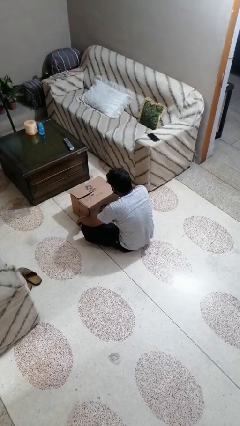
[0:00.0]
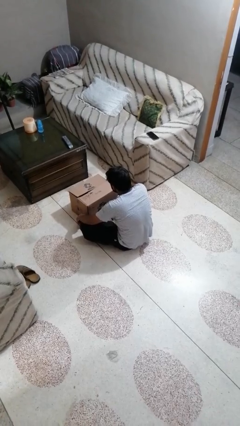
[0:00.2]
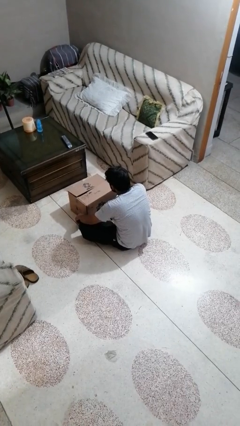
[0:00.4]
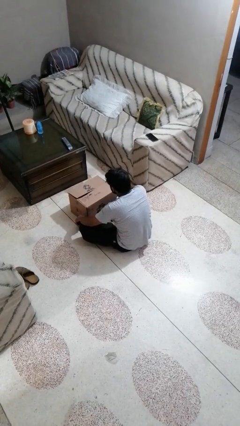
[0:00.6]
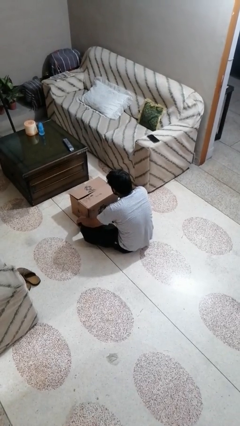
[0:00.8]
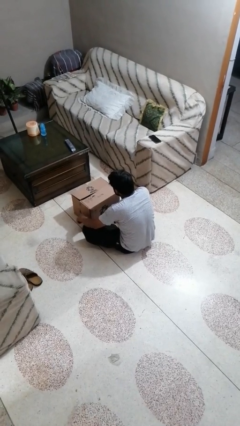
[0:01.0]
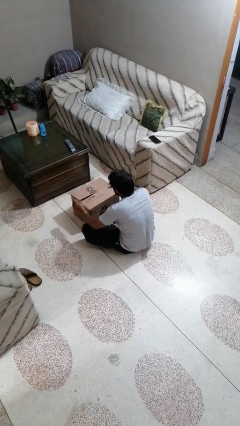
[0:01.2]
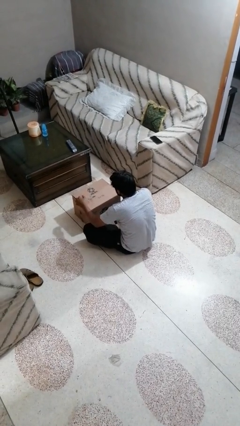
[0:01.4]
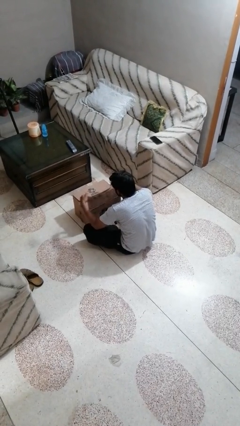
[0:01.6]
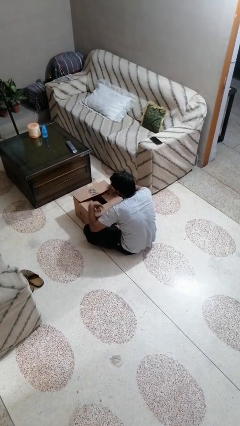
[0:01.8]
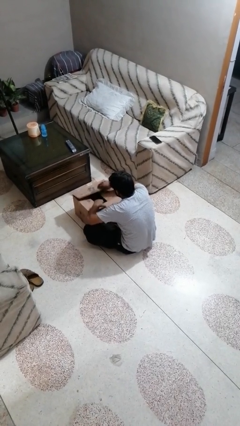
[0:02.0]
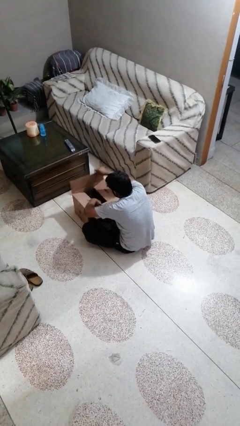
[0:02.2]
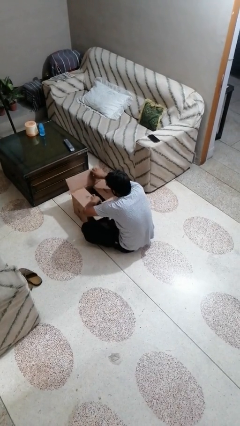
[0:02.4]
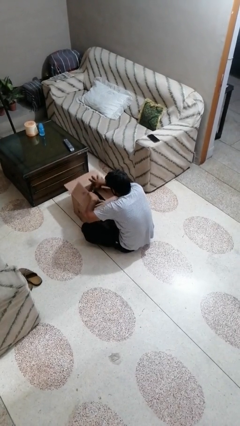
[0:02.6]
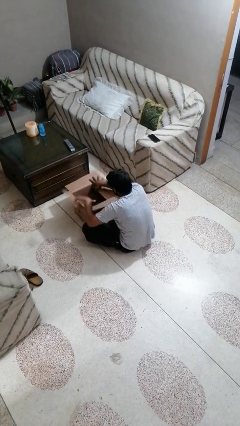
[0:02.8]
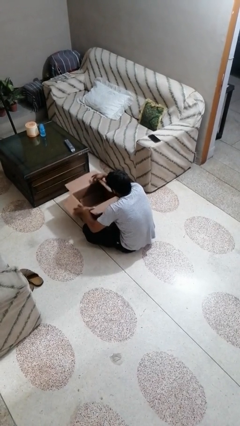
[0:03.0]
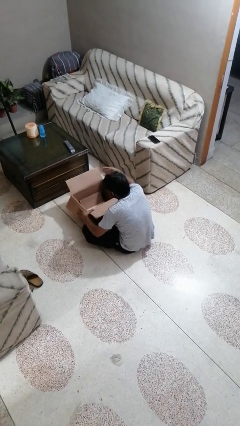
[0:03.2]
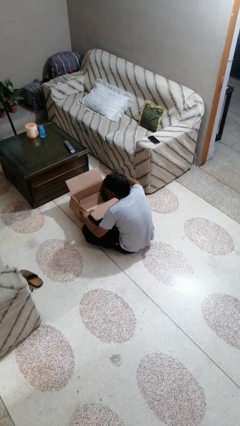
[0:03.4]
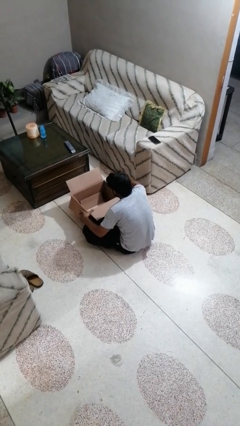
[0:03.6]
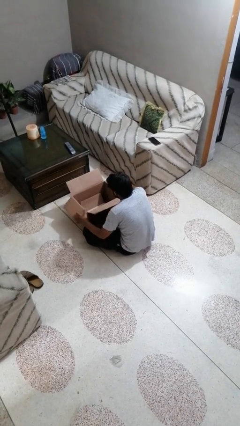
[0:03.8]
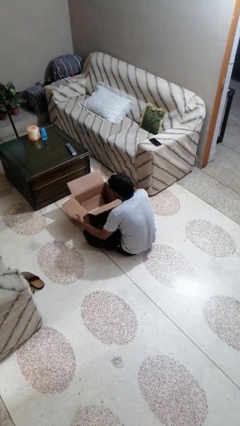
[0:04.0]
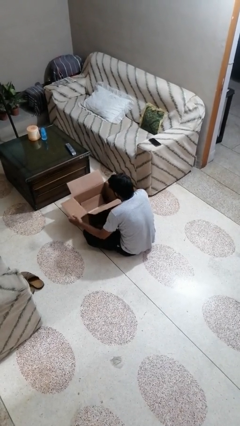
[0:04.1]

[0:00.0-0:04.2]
person opens box

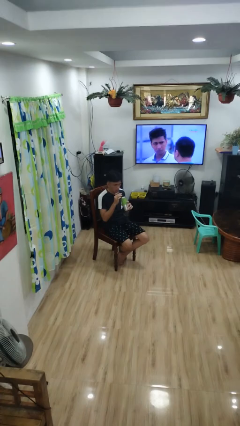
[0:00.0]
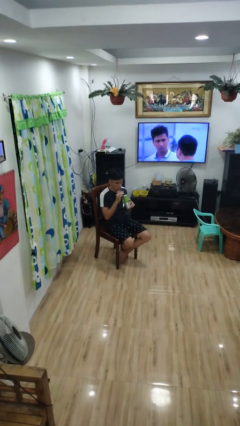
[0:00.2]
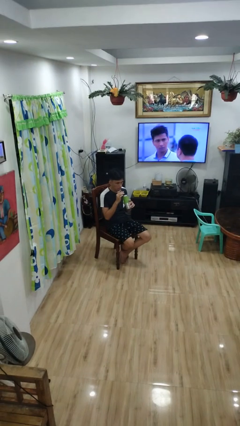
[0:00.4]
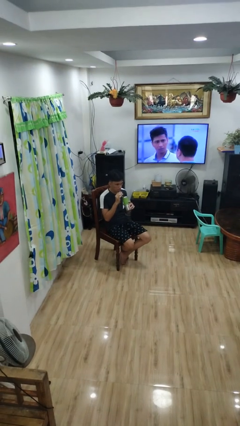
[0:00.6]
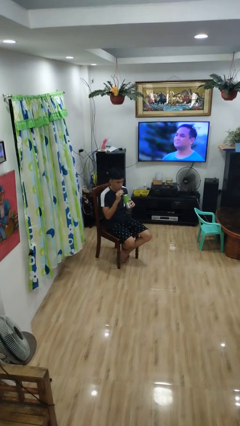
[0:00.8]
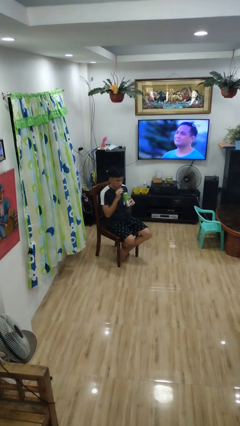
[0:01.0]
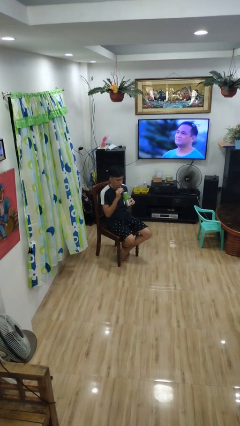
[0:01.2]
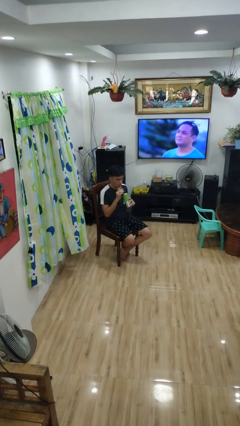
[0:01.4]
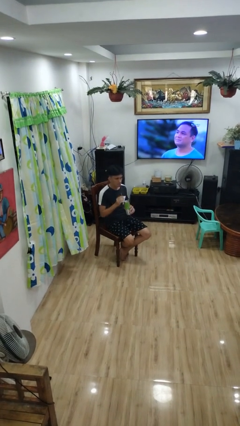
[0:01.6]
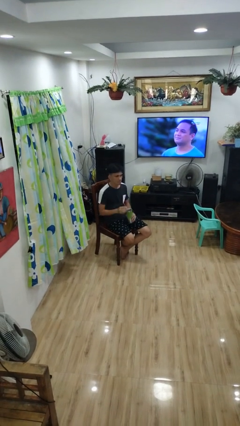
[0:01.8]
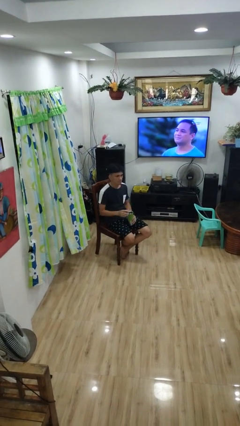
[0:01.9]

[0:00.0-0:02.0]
person drinks from straw

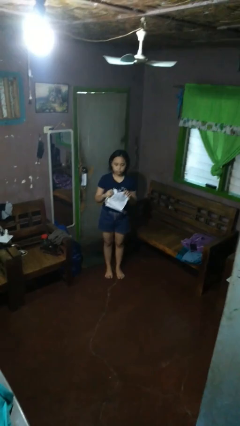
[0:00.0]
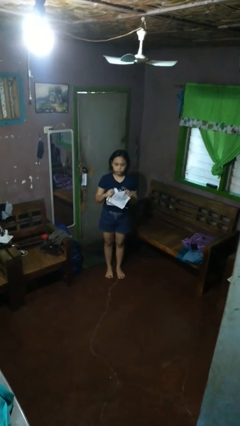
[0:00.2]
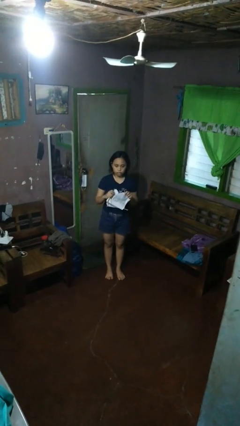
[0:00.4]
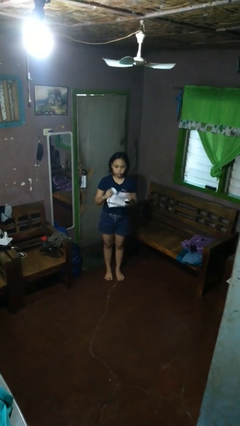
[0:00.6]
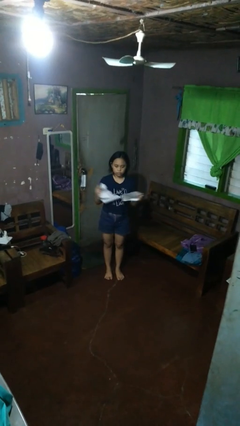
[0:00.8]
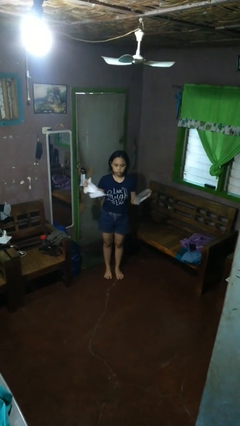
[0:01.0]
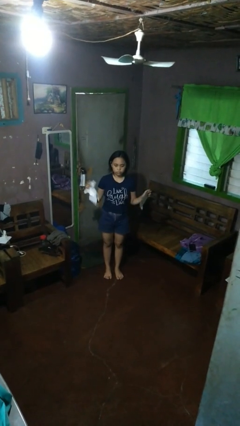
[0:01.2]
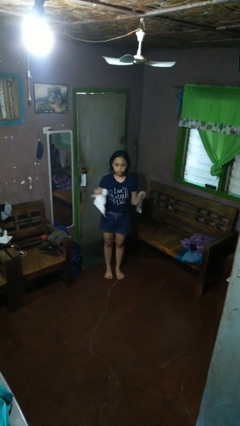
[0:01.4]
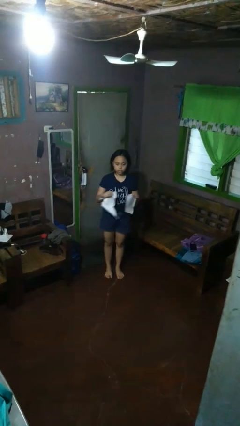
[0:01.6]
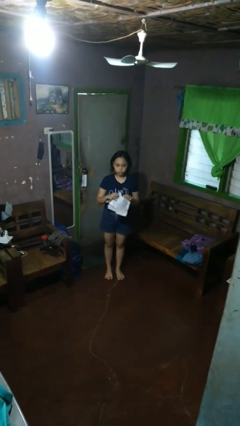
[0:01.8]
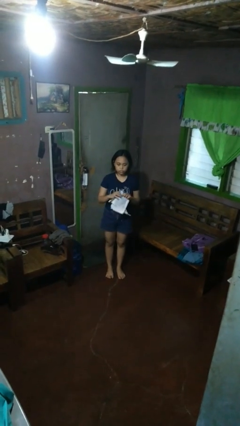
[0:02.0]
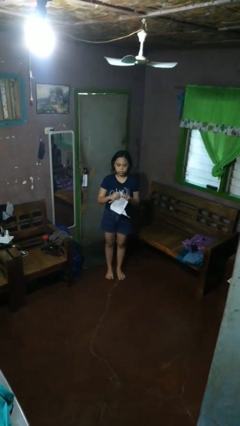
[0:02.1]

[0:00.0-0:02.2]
person tears paper

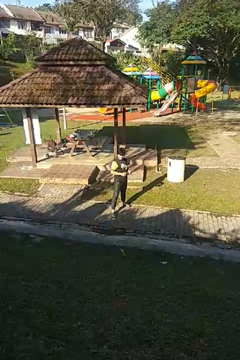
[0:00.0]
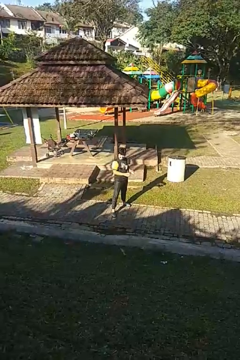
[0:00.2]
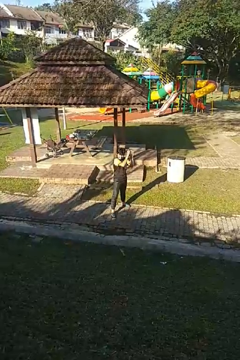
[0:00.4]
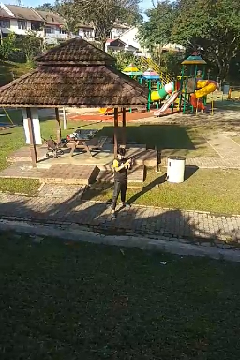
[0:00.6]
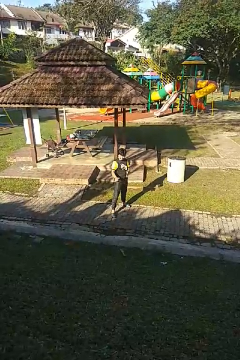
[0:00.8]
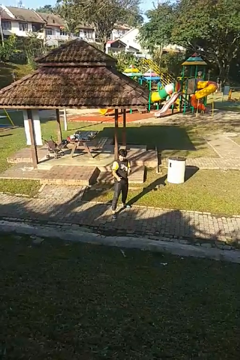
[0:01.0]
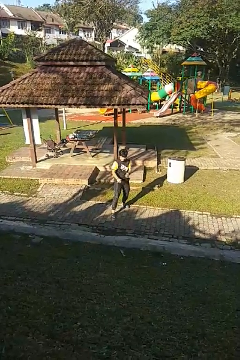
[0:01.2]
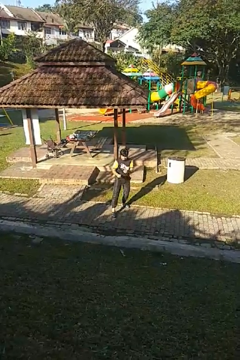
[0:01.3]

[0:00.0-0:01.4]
person karate chop

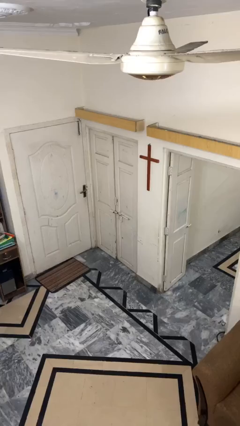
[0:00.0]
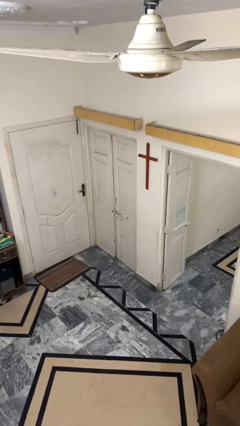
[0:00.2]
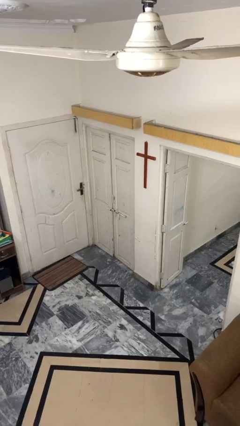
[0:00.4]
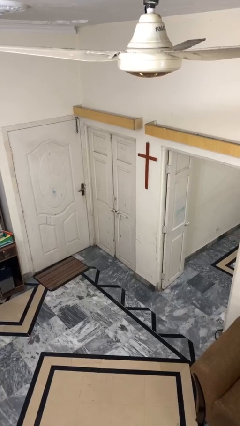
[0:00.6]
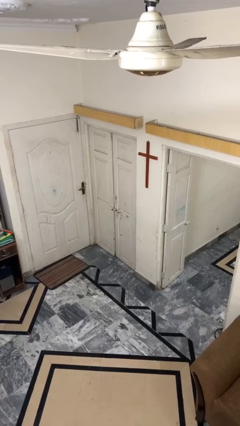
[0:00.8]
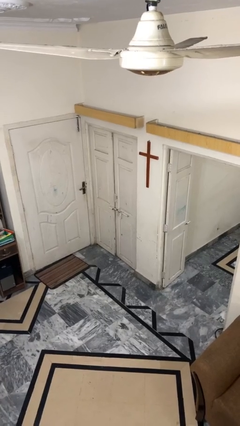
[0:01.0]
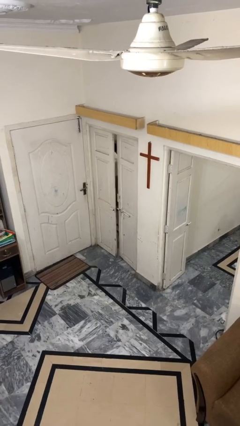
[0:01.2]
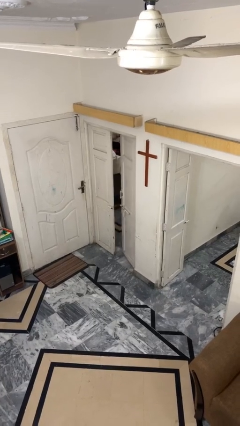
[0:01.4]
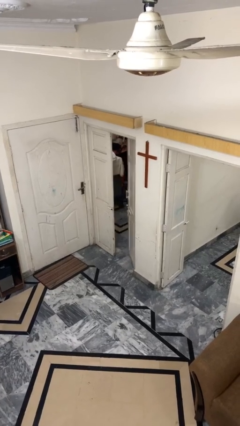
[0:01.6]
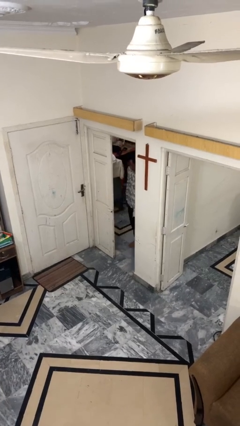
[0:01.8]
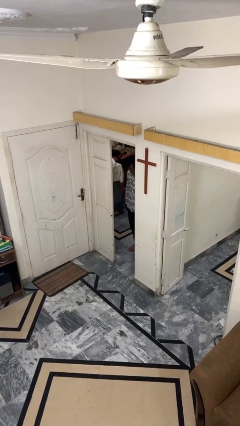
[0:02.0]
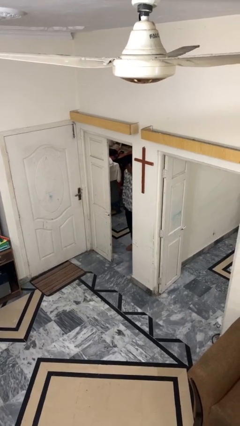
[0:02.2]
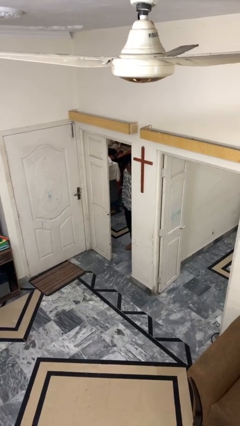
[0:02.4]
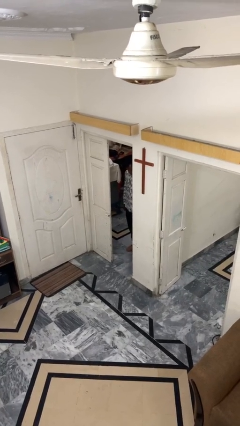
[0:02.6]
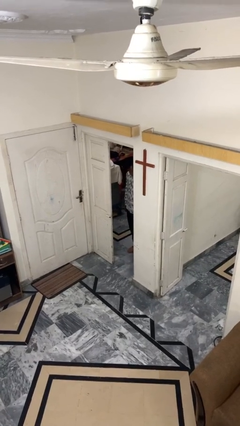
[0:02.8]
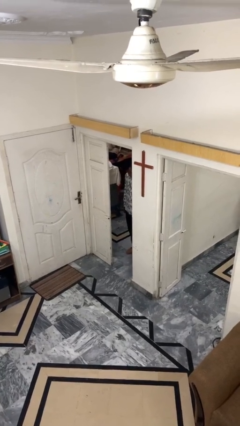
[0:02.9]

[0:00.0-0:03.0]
person opens facility door

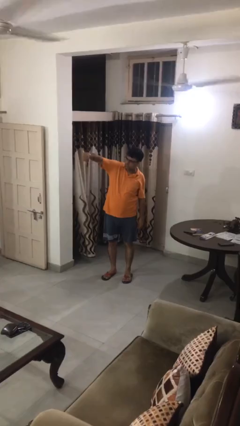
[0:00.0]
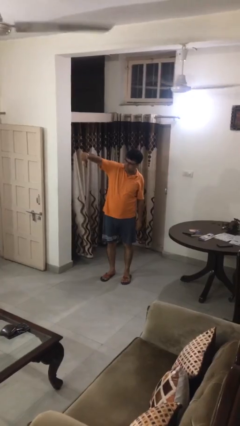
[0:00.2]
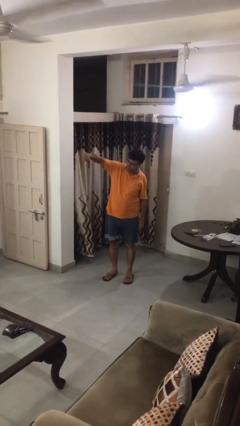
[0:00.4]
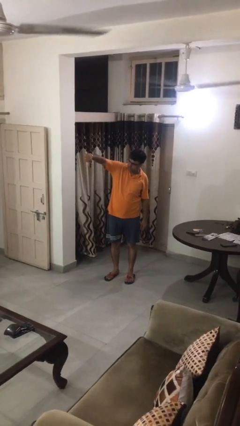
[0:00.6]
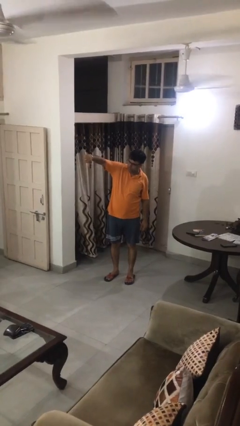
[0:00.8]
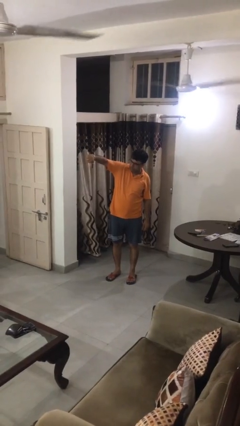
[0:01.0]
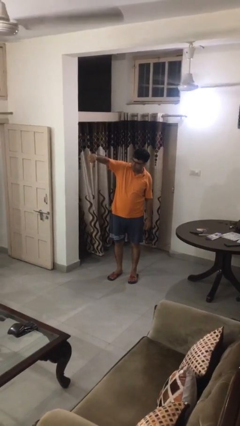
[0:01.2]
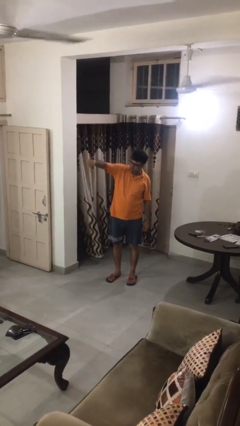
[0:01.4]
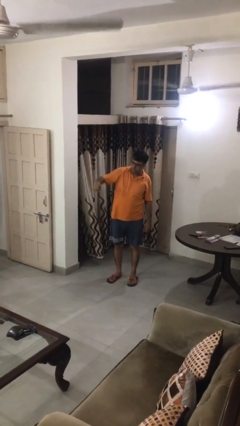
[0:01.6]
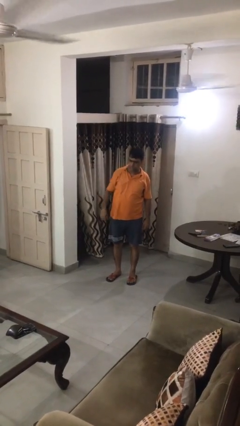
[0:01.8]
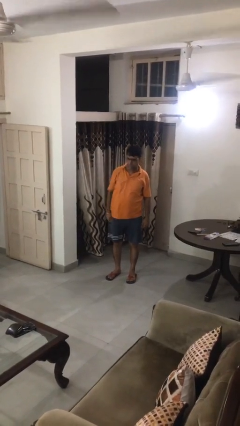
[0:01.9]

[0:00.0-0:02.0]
person gestures thumbs down

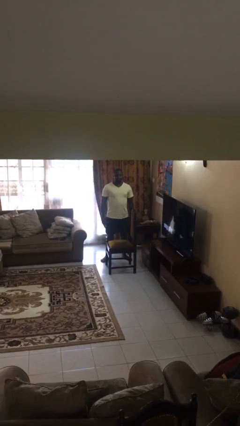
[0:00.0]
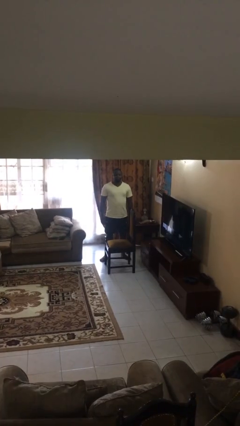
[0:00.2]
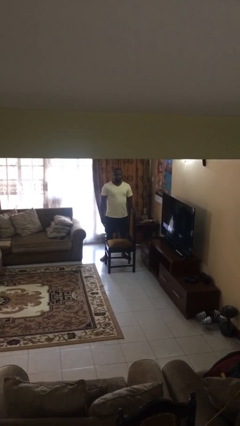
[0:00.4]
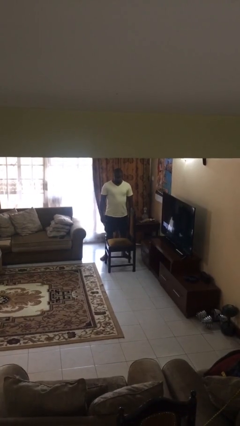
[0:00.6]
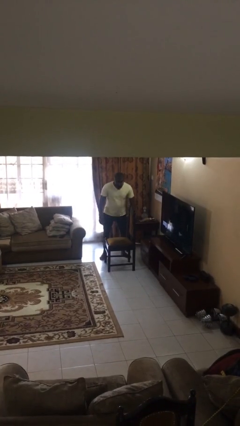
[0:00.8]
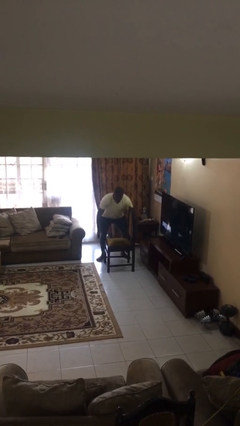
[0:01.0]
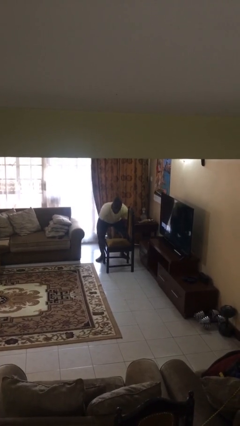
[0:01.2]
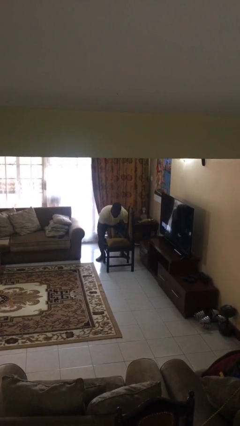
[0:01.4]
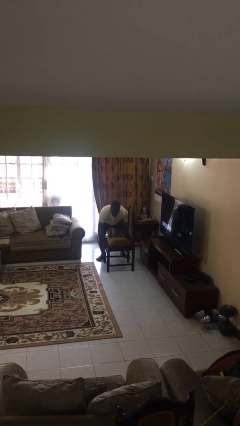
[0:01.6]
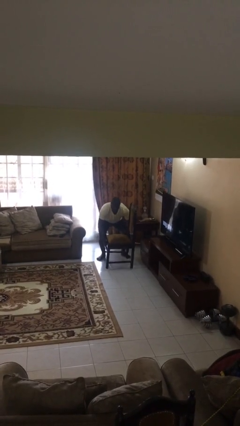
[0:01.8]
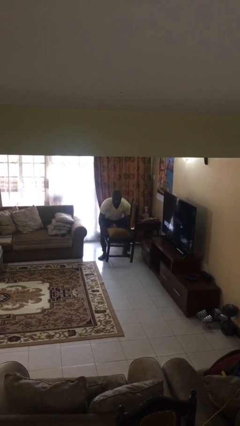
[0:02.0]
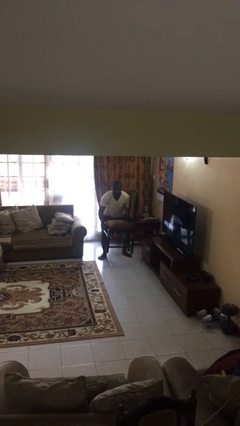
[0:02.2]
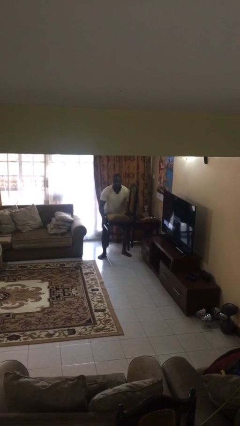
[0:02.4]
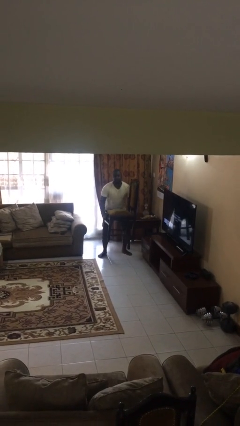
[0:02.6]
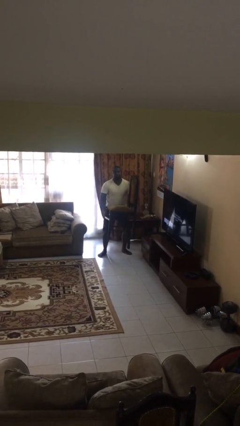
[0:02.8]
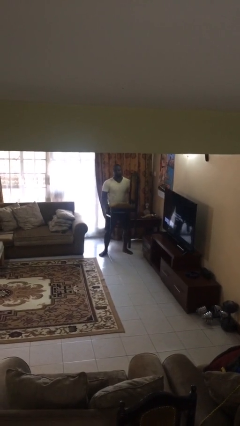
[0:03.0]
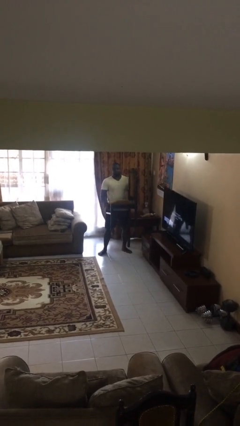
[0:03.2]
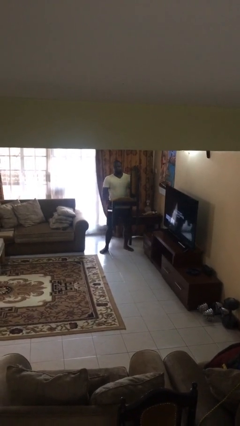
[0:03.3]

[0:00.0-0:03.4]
person picks up object from floor
